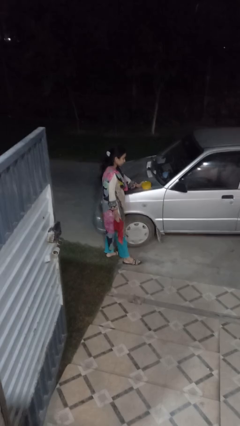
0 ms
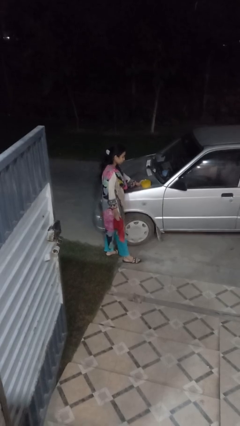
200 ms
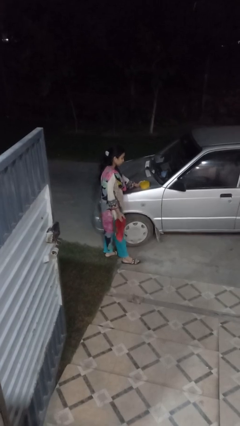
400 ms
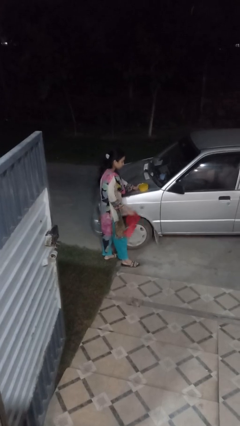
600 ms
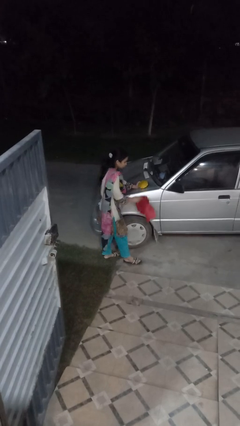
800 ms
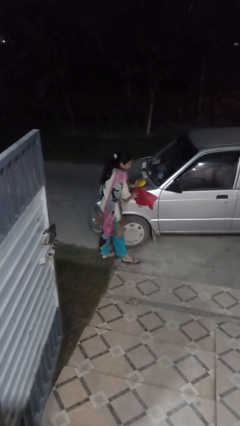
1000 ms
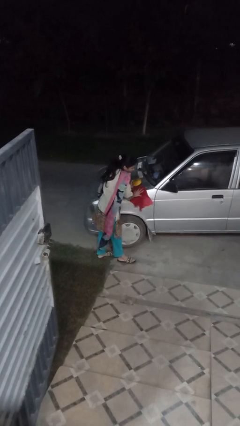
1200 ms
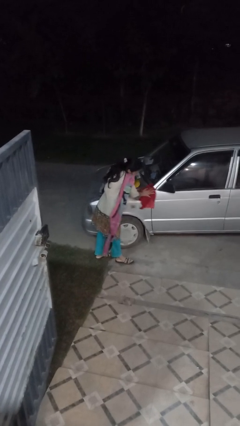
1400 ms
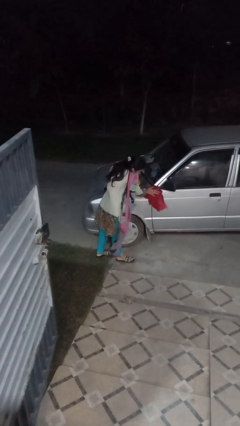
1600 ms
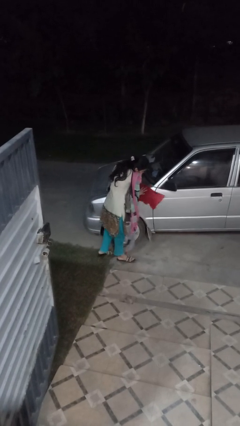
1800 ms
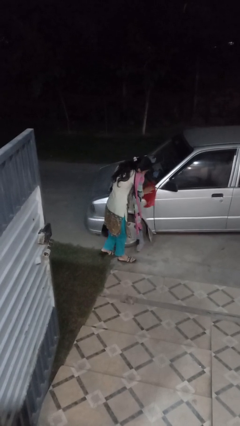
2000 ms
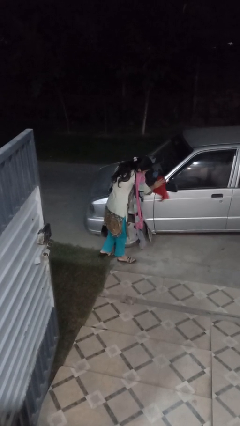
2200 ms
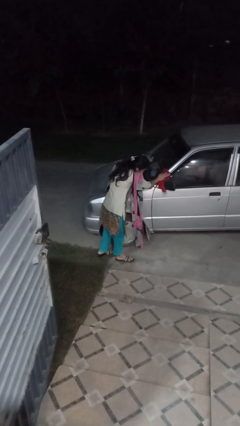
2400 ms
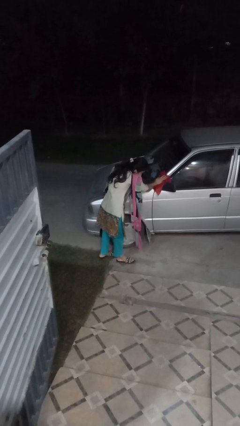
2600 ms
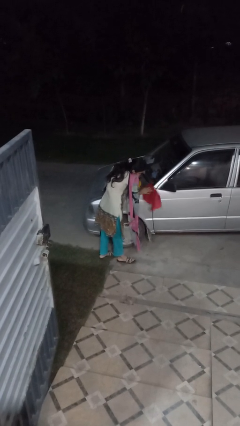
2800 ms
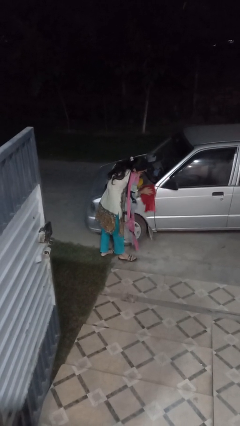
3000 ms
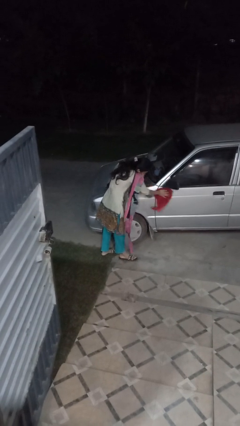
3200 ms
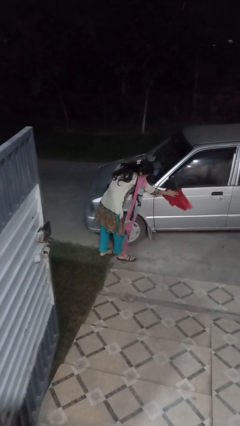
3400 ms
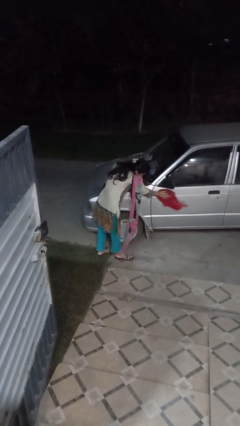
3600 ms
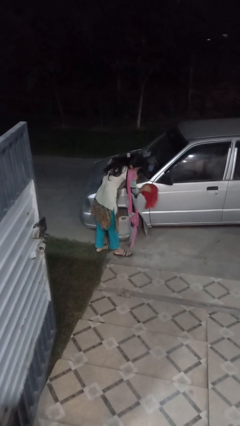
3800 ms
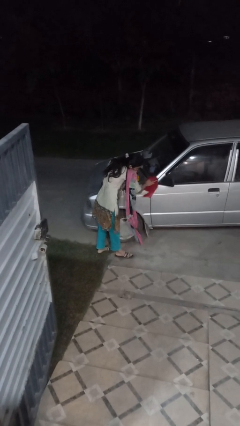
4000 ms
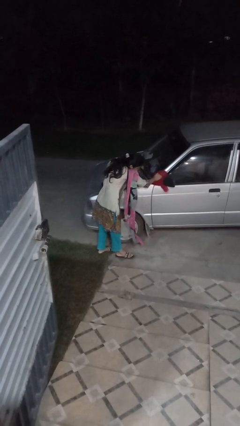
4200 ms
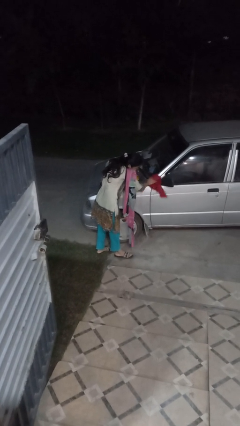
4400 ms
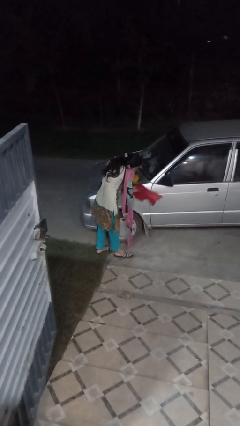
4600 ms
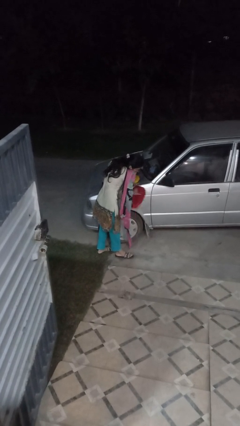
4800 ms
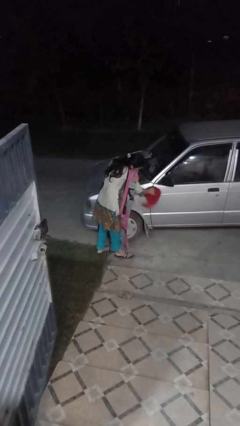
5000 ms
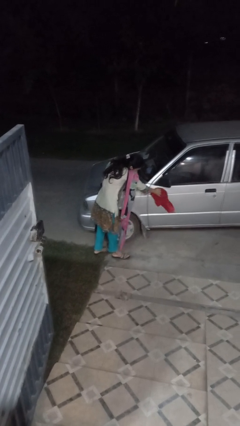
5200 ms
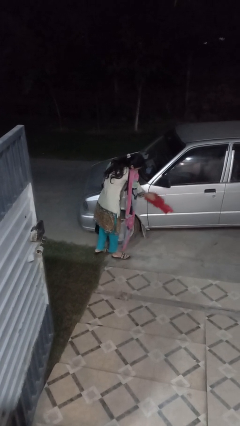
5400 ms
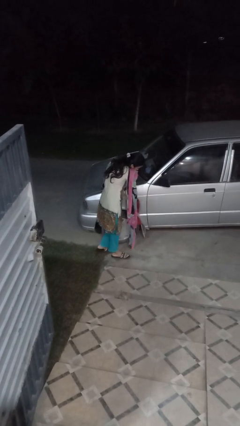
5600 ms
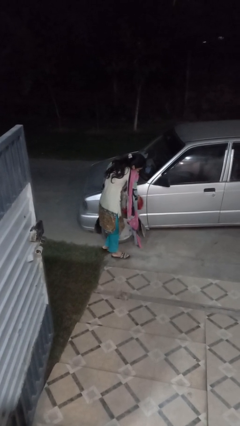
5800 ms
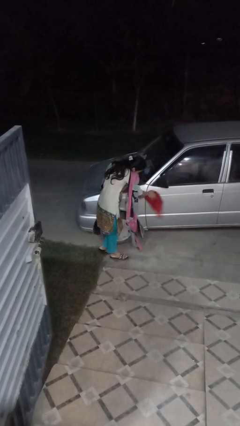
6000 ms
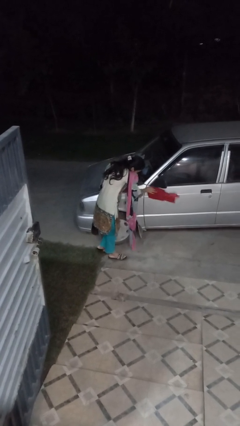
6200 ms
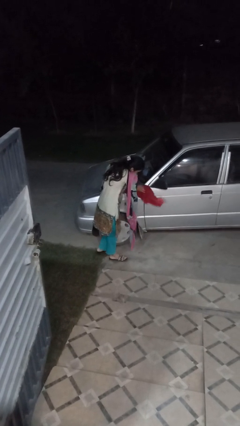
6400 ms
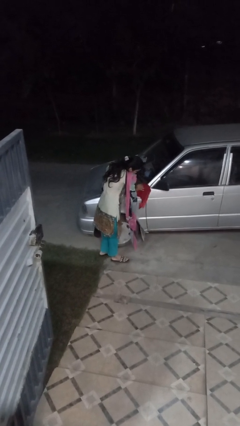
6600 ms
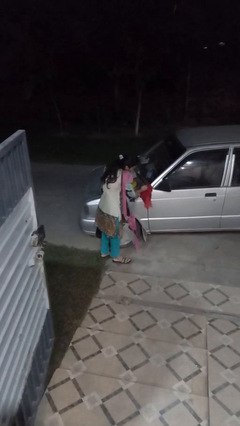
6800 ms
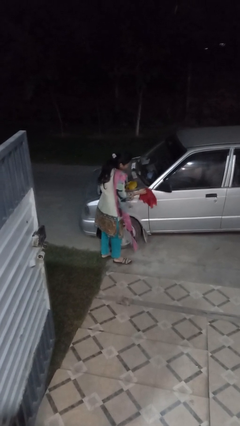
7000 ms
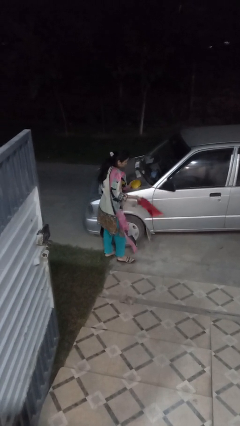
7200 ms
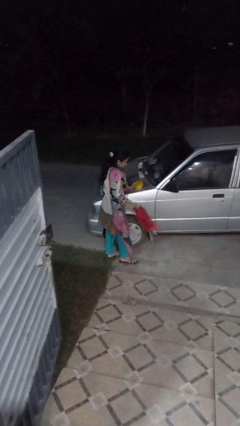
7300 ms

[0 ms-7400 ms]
person polishes car with rag

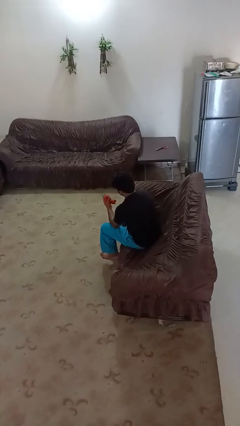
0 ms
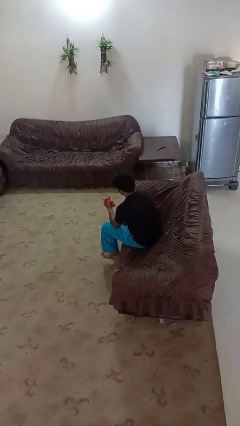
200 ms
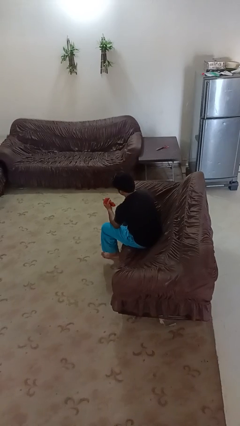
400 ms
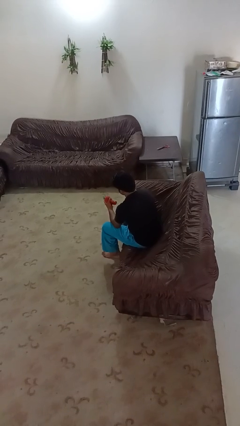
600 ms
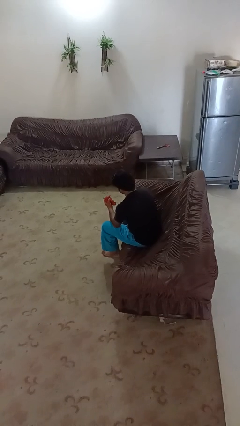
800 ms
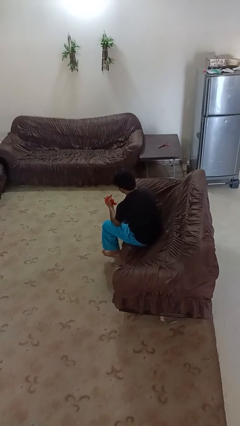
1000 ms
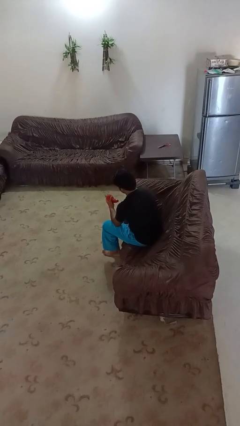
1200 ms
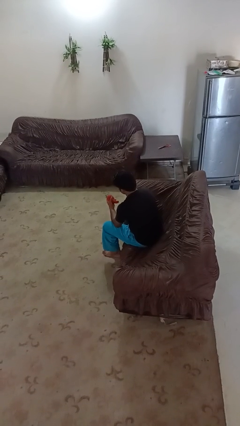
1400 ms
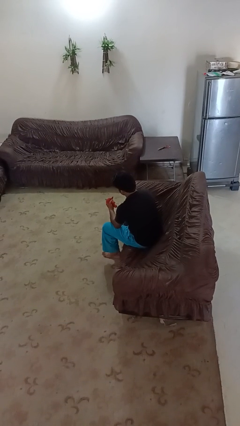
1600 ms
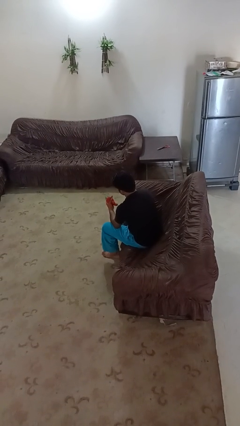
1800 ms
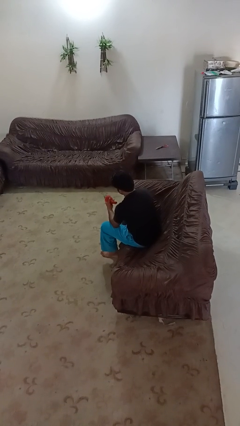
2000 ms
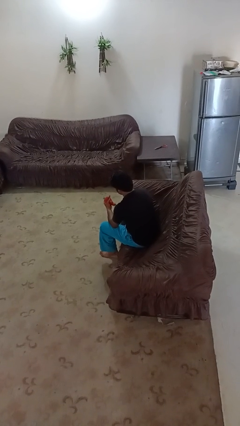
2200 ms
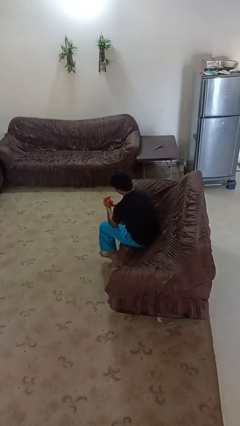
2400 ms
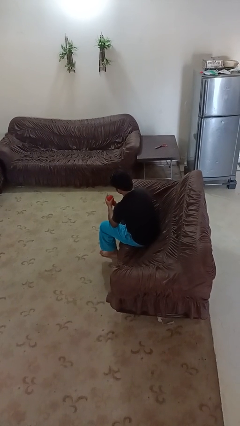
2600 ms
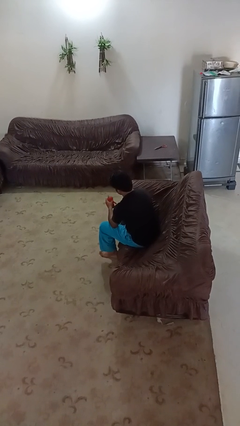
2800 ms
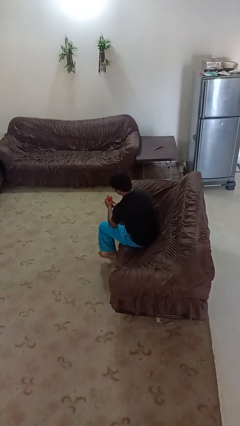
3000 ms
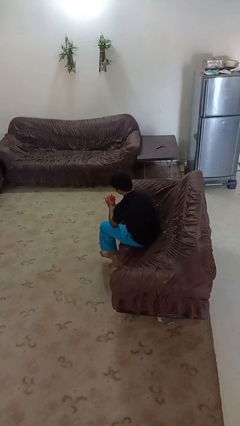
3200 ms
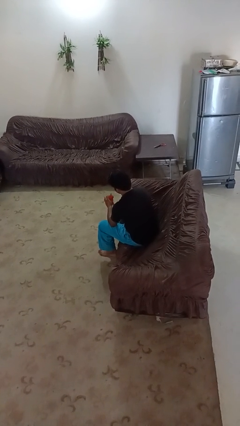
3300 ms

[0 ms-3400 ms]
person squeezes object

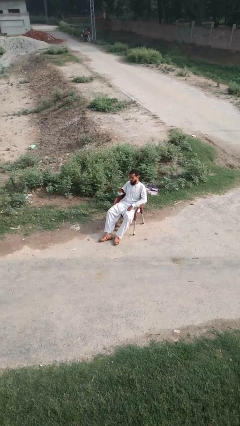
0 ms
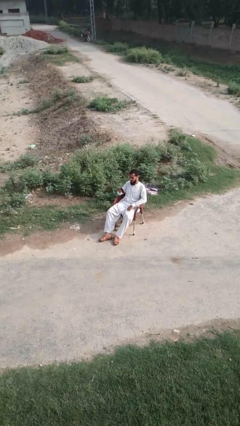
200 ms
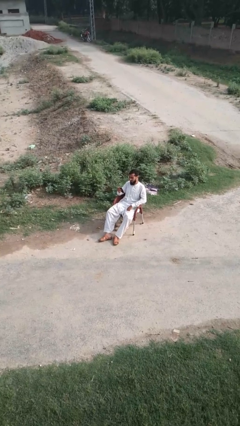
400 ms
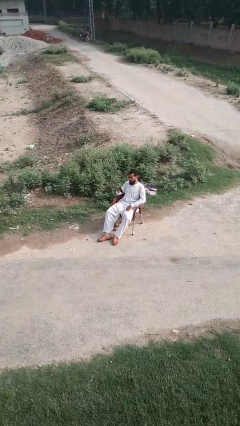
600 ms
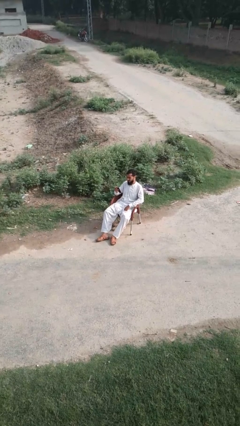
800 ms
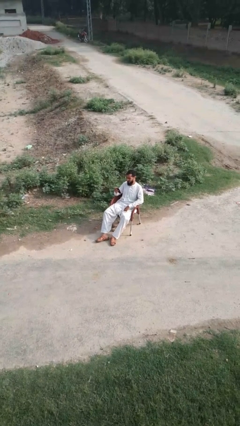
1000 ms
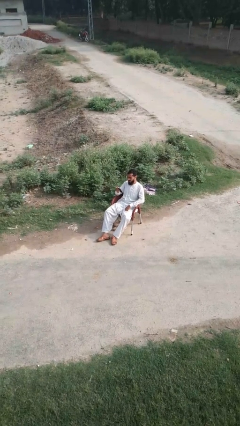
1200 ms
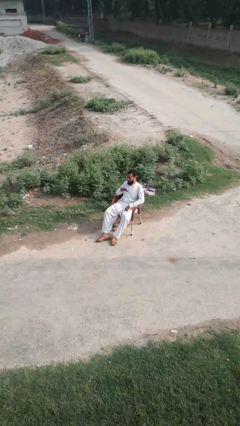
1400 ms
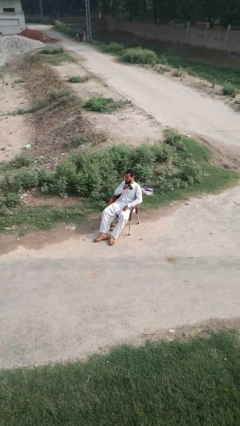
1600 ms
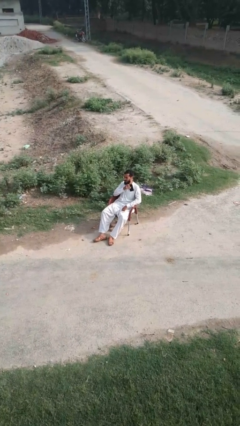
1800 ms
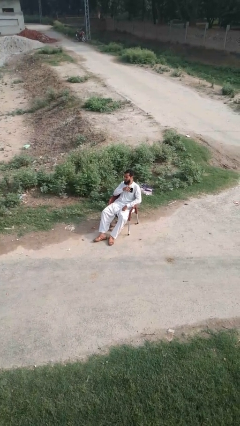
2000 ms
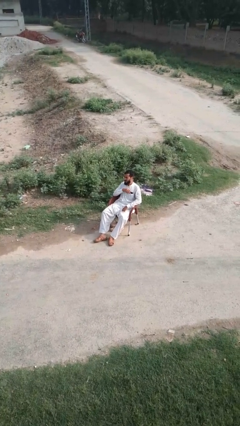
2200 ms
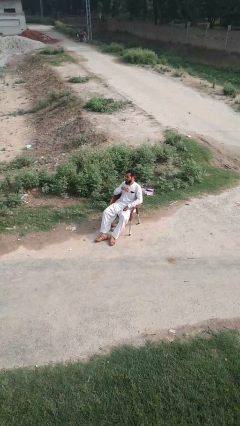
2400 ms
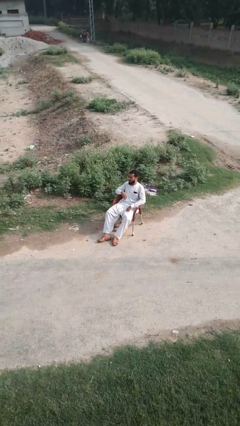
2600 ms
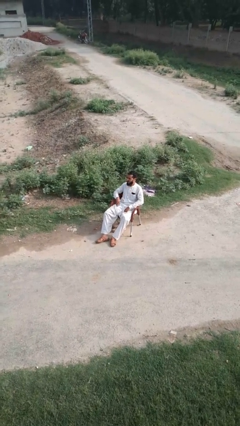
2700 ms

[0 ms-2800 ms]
person puts phone into pocket

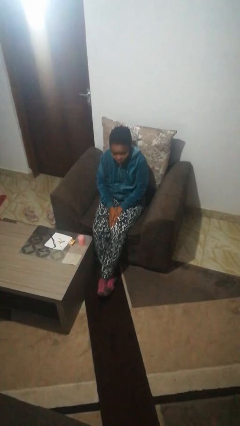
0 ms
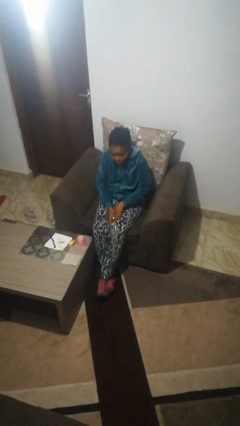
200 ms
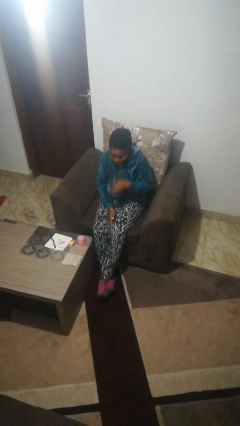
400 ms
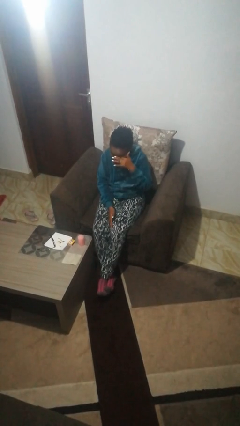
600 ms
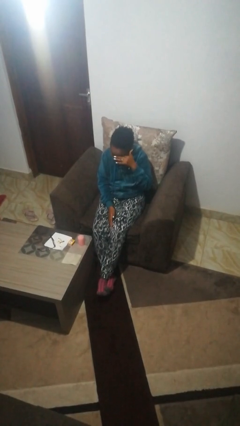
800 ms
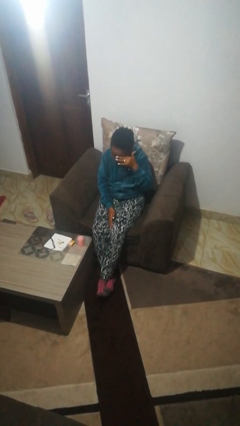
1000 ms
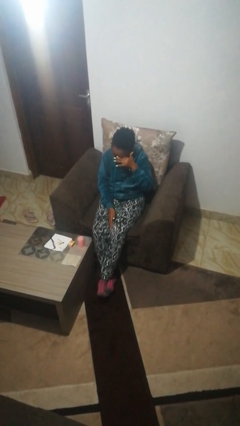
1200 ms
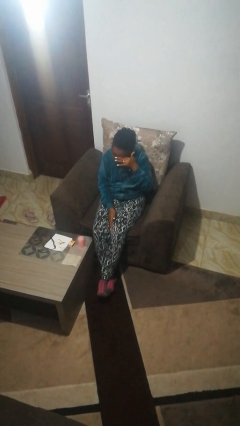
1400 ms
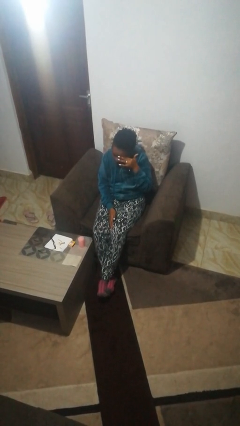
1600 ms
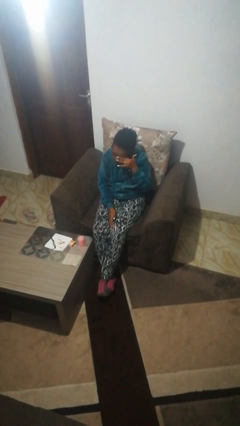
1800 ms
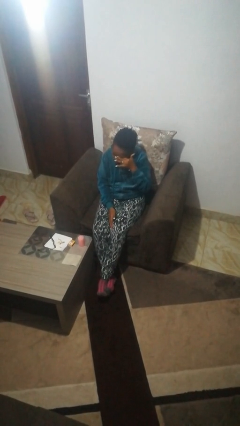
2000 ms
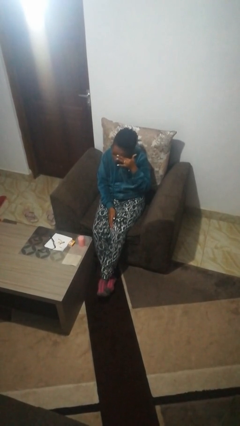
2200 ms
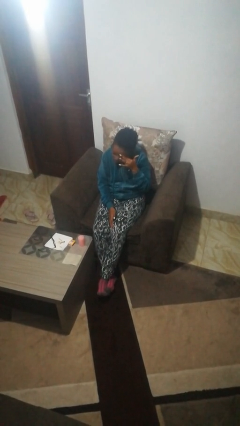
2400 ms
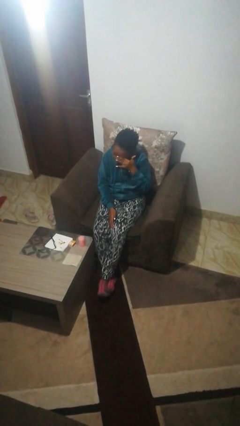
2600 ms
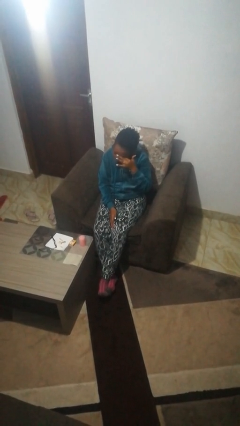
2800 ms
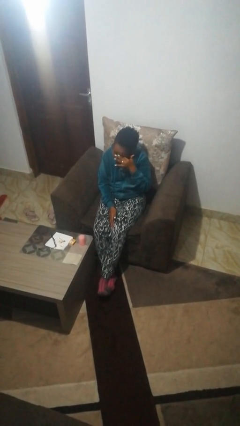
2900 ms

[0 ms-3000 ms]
person rubs eyes

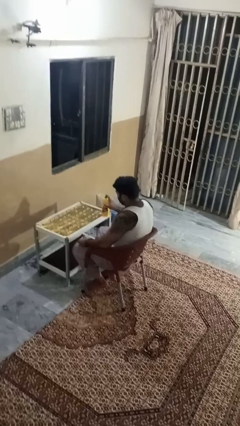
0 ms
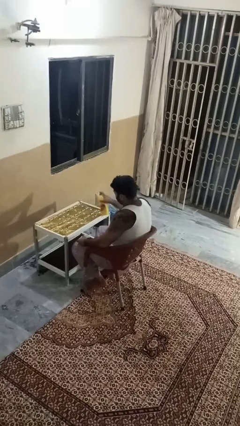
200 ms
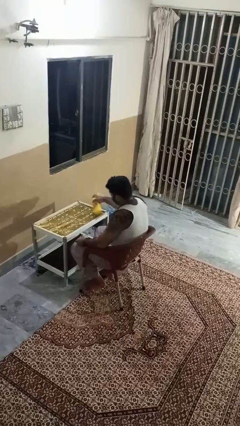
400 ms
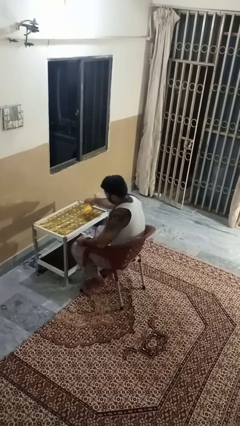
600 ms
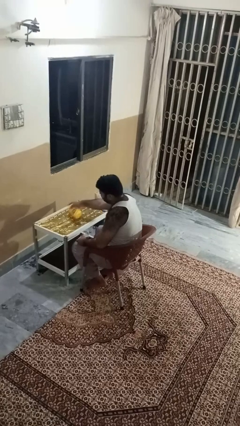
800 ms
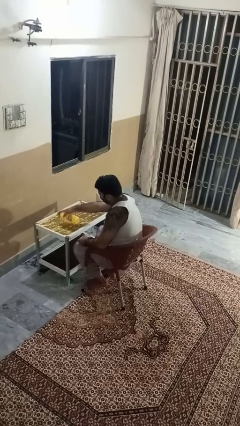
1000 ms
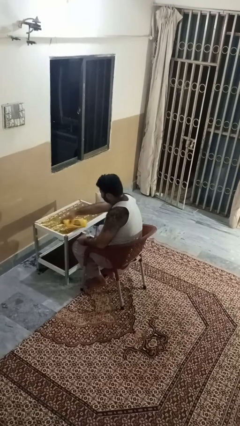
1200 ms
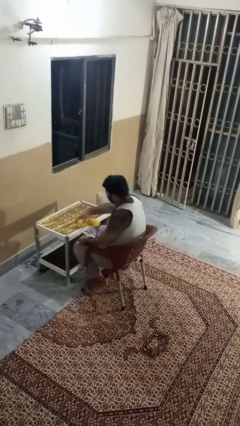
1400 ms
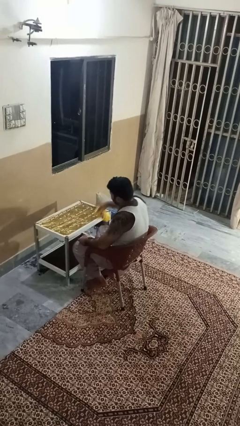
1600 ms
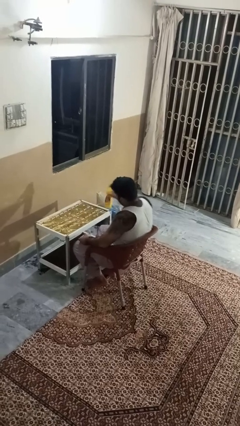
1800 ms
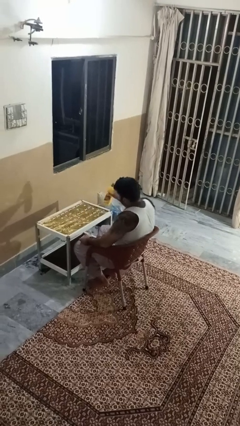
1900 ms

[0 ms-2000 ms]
person sprays from bottle
